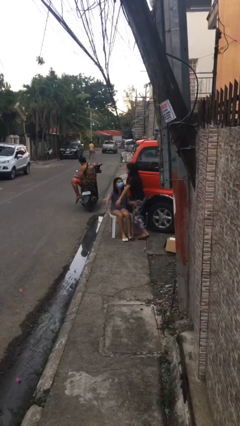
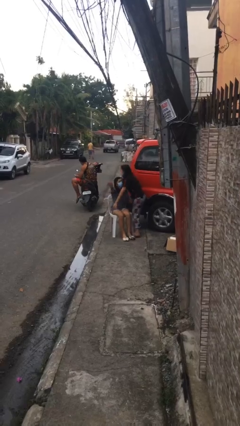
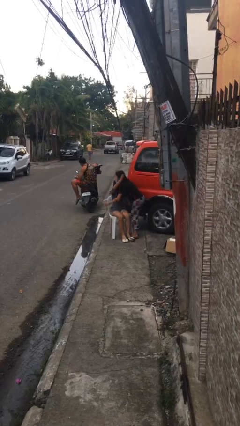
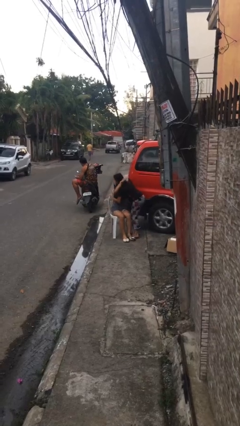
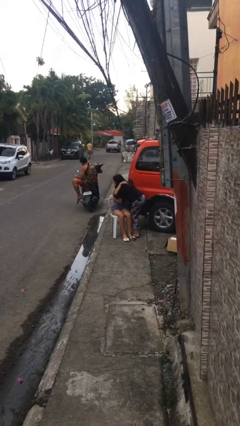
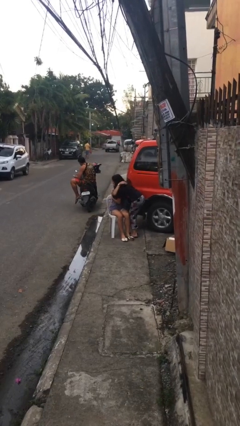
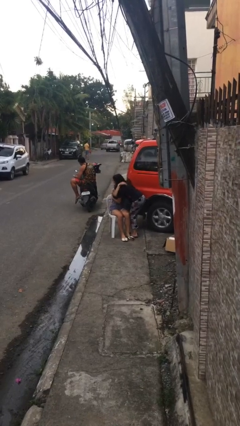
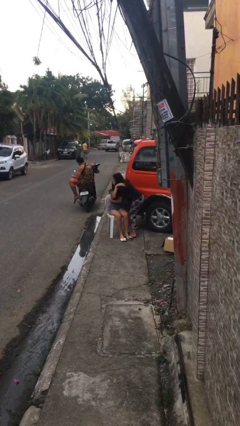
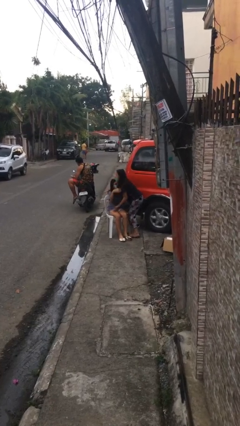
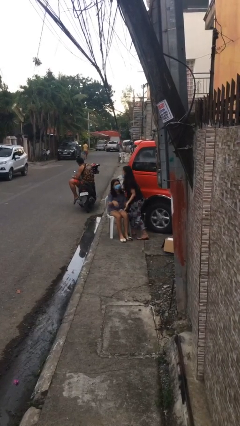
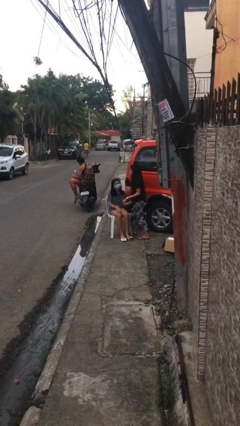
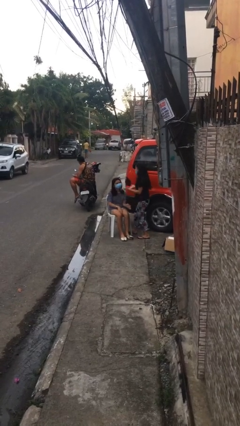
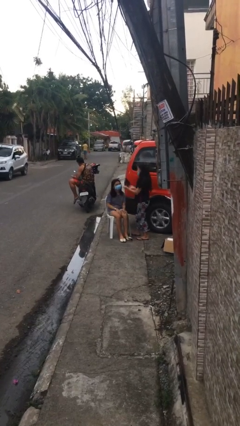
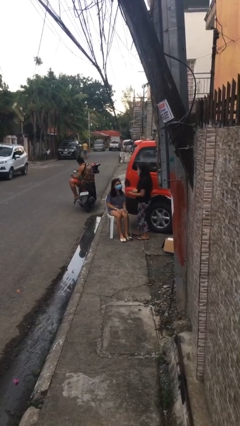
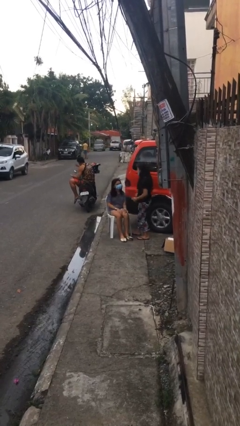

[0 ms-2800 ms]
person embraces person

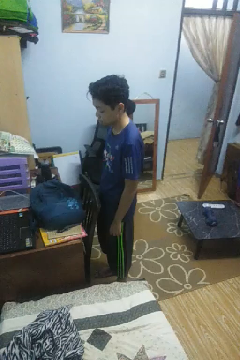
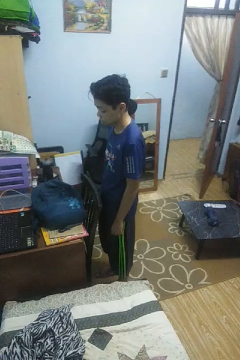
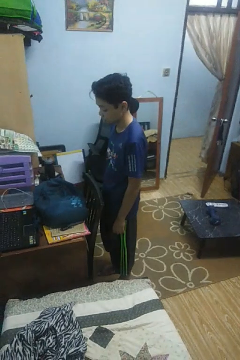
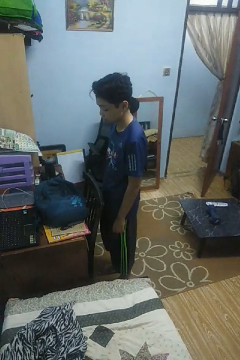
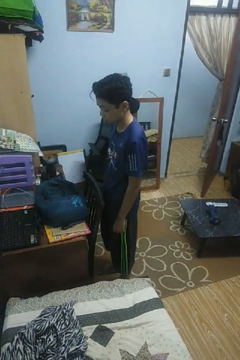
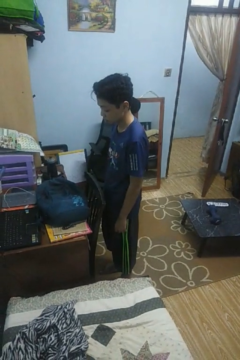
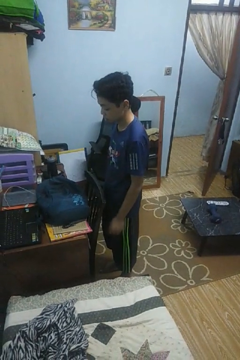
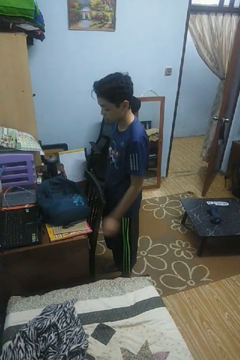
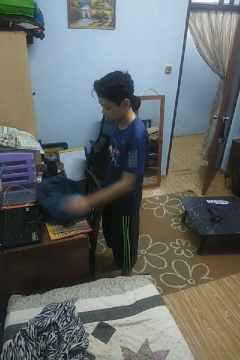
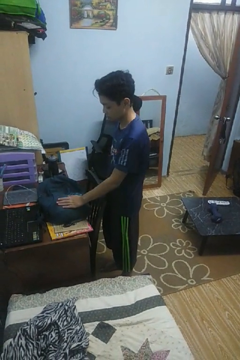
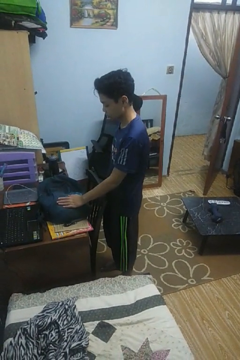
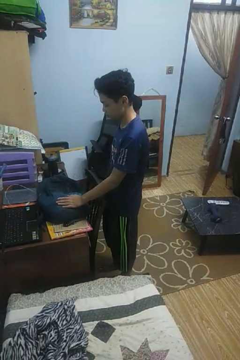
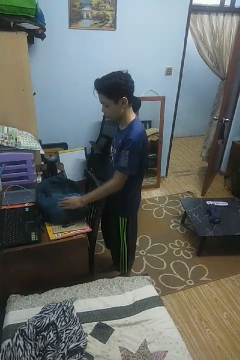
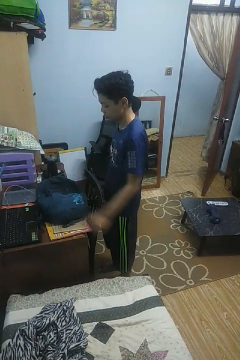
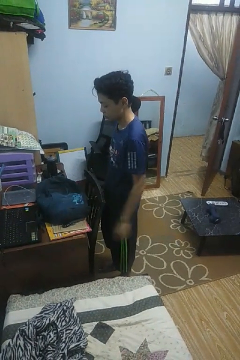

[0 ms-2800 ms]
person taps object with finger

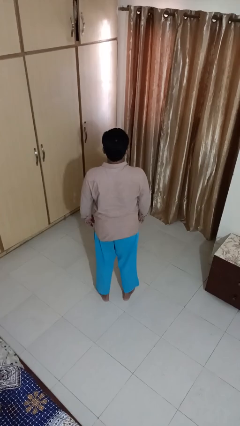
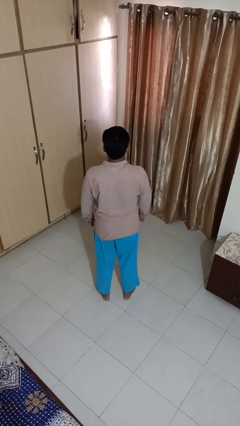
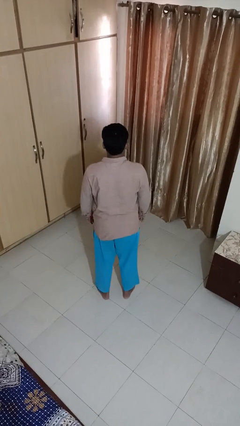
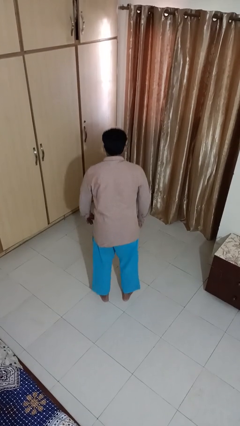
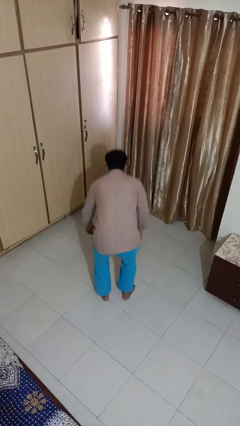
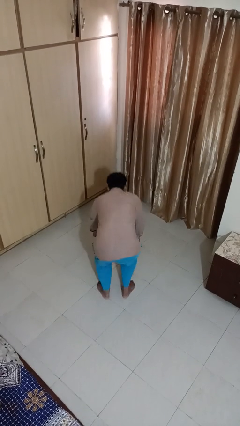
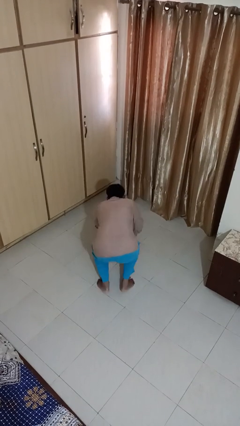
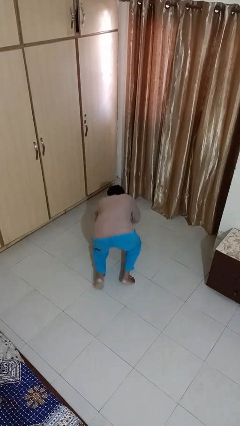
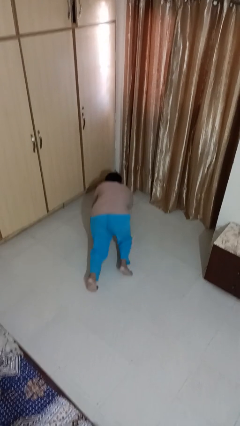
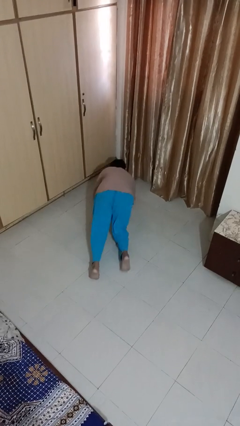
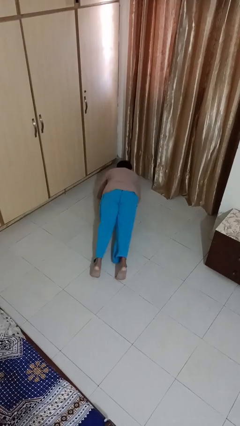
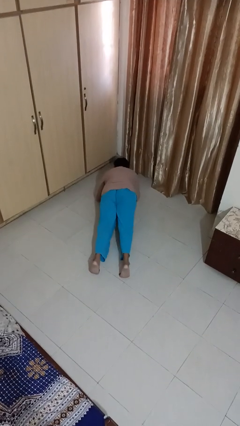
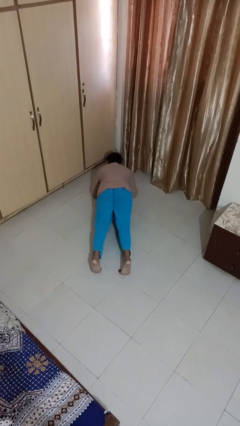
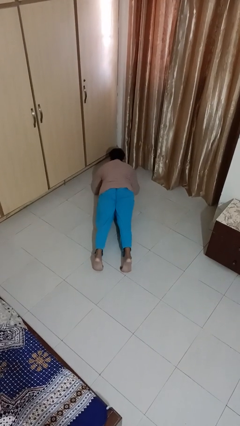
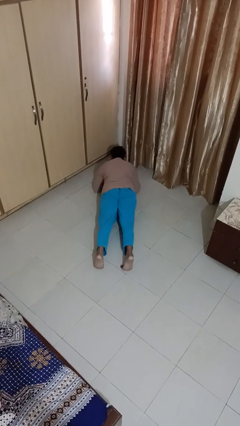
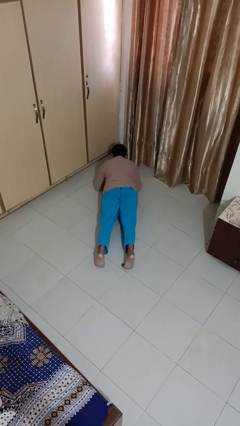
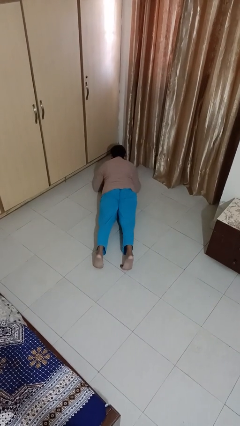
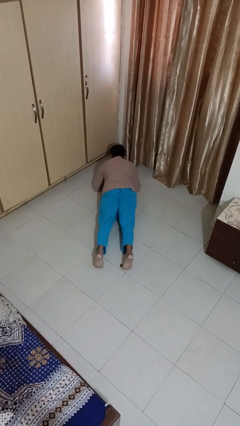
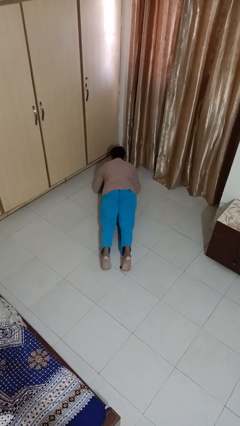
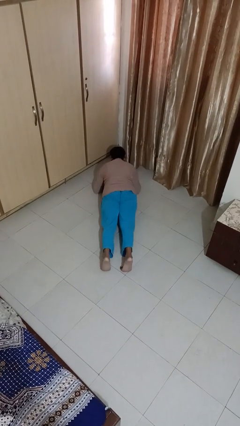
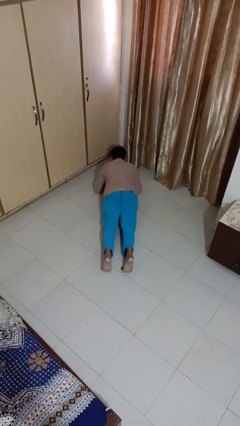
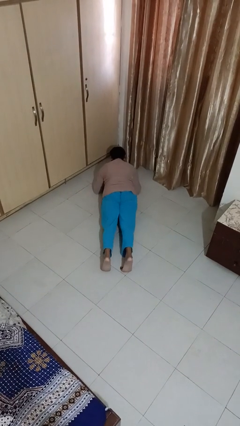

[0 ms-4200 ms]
person exercises with plank

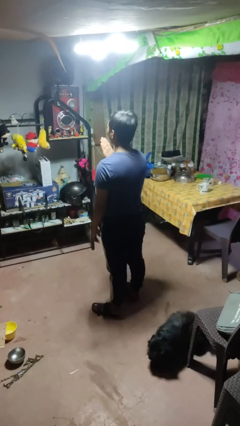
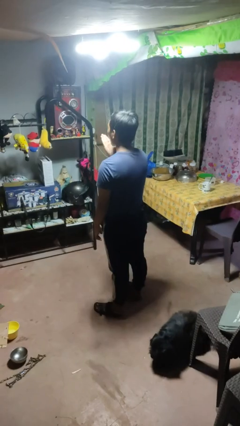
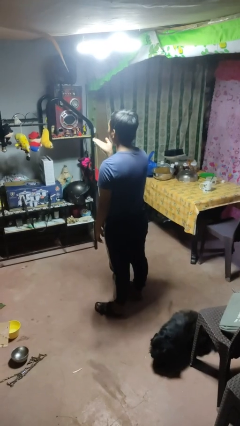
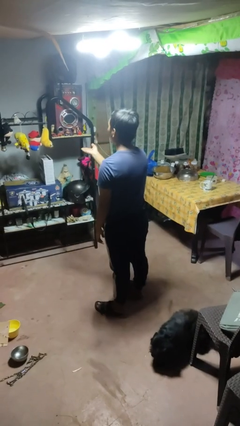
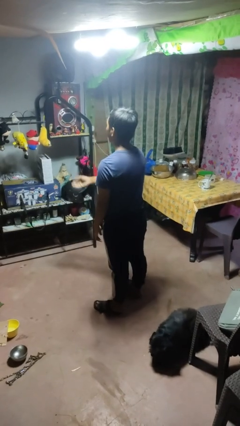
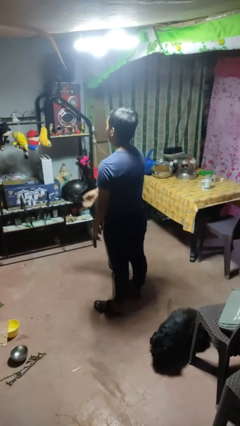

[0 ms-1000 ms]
person gestures blow kiss

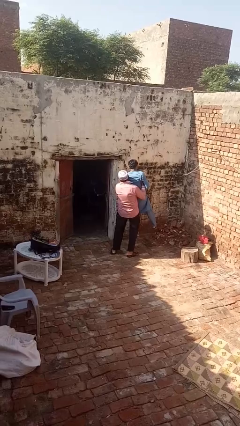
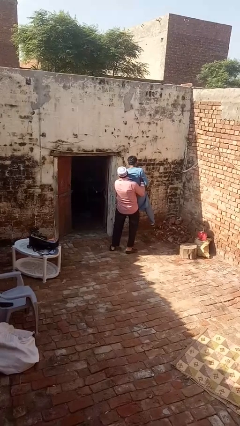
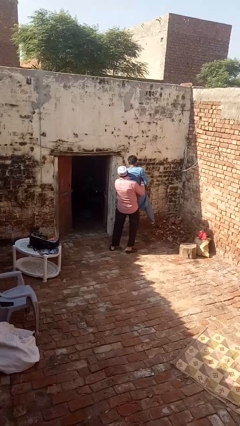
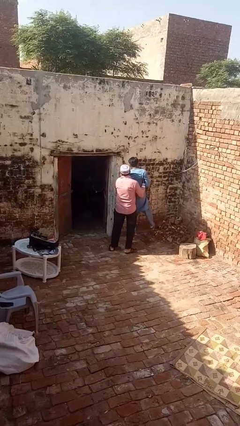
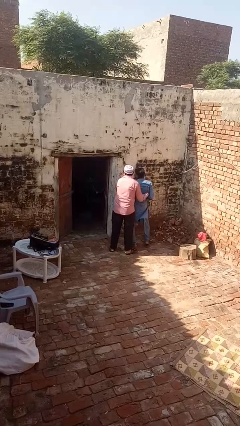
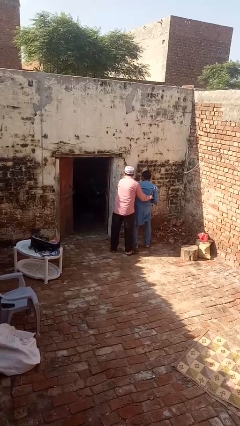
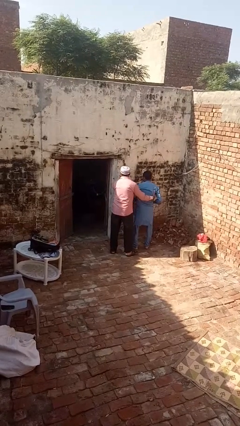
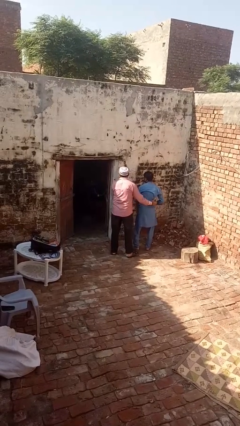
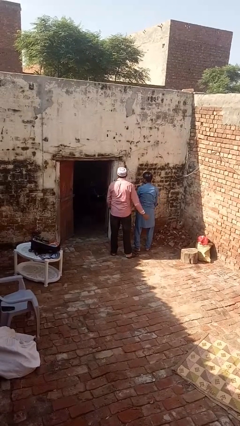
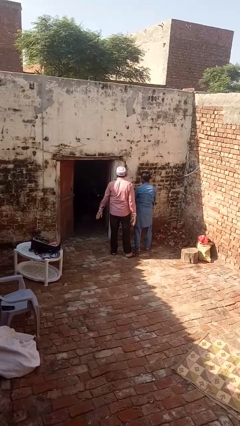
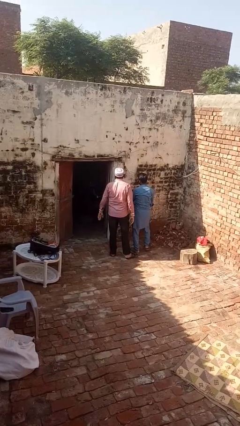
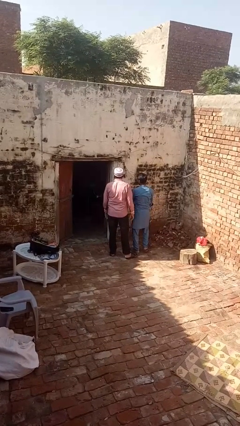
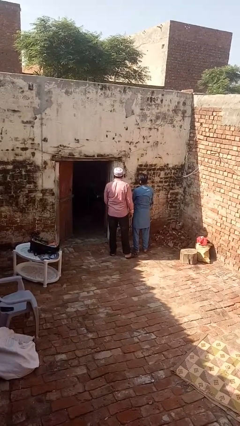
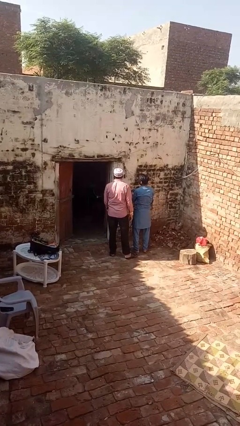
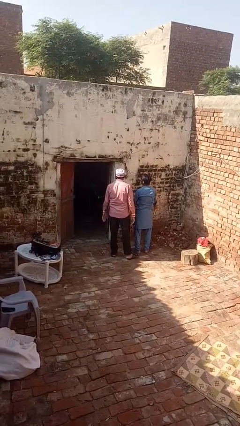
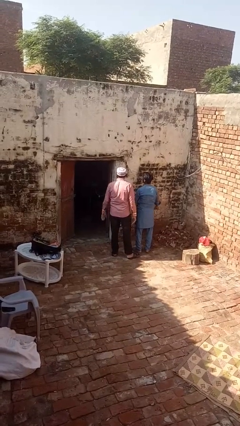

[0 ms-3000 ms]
person puts down person

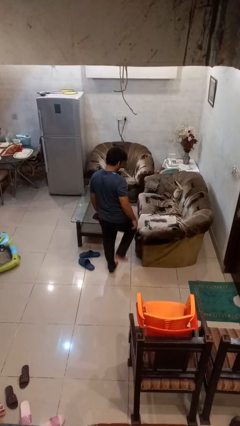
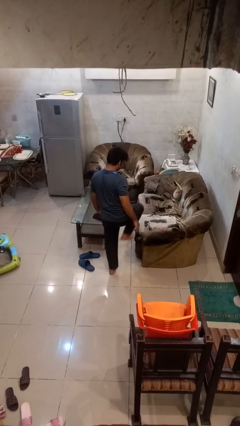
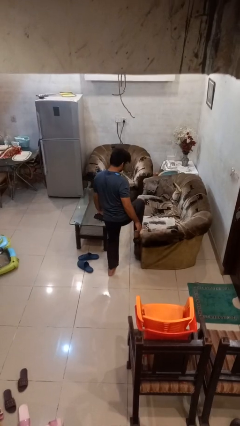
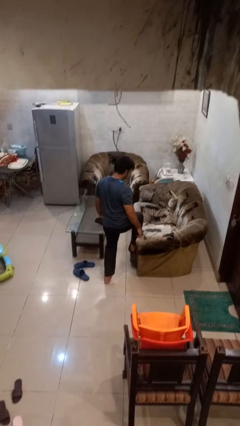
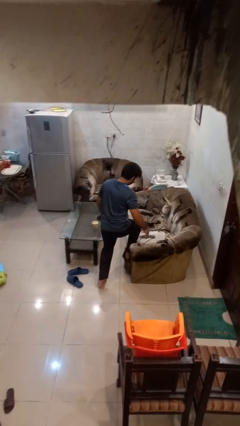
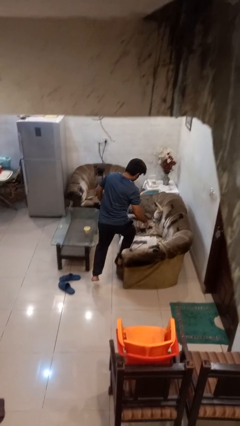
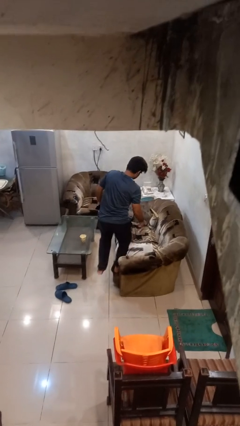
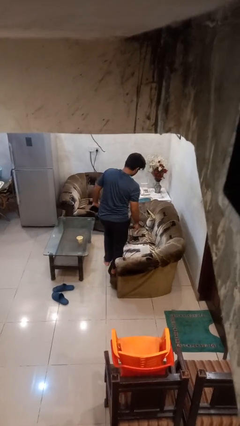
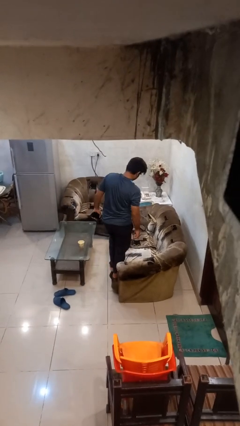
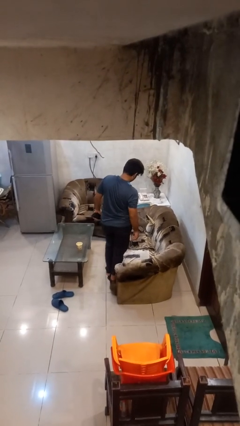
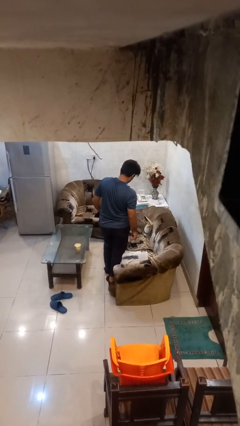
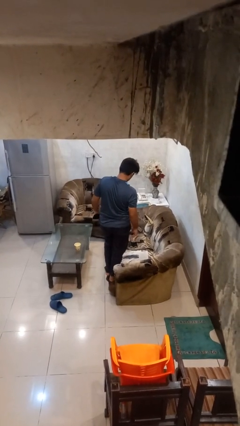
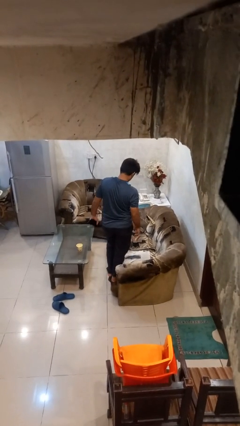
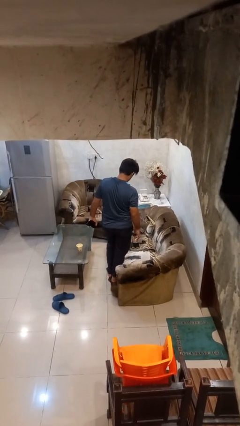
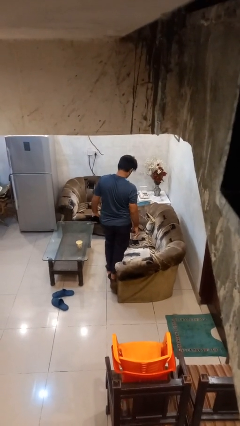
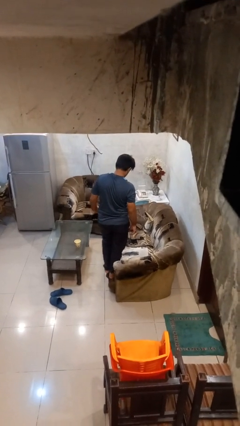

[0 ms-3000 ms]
person climbs on couch

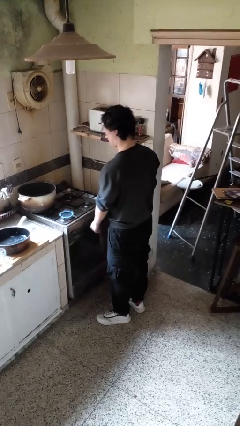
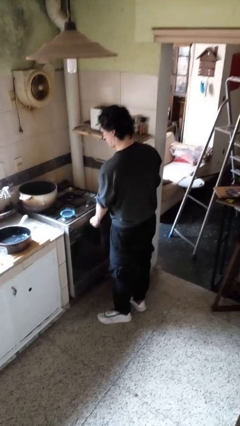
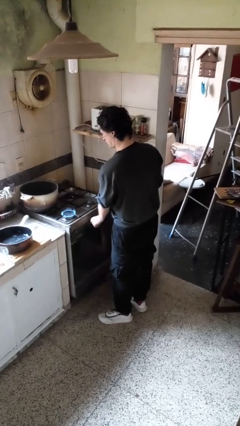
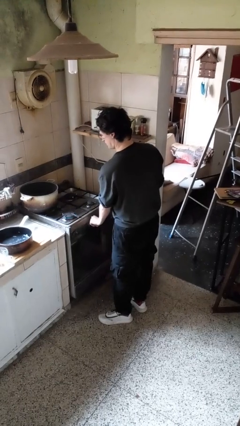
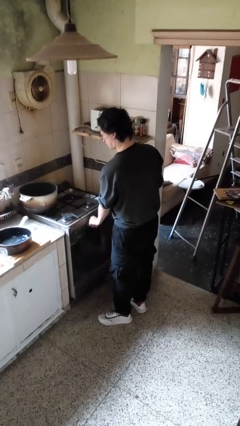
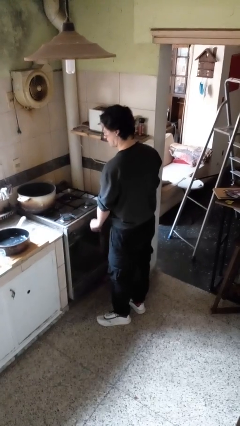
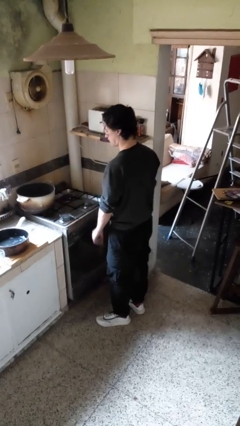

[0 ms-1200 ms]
person turns off stovetop
